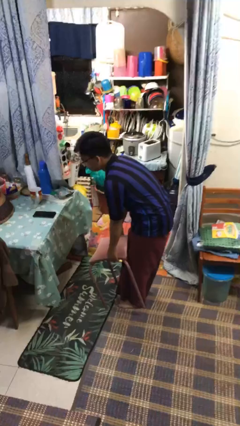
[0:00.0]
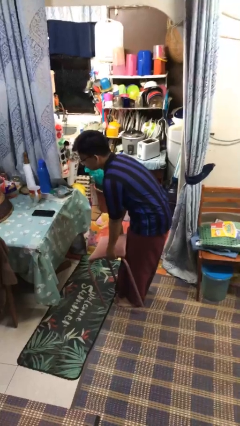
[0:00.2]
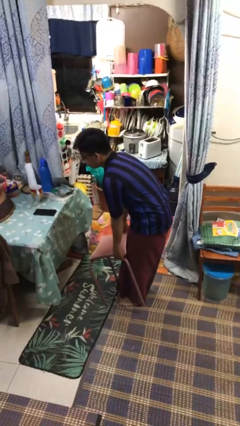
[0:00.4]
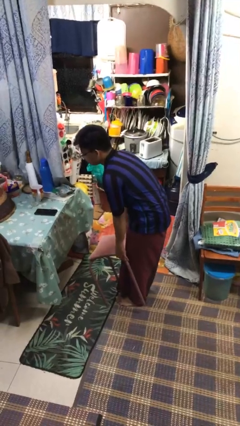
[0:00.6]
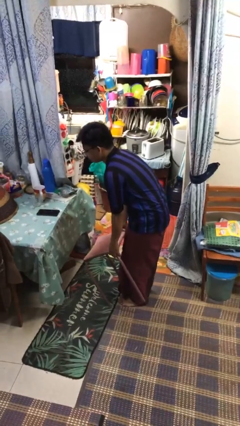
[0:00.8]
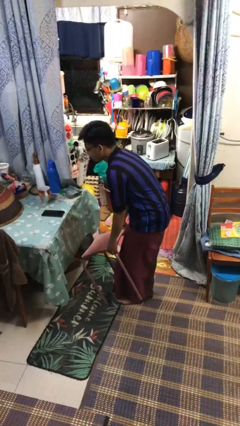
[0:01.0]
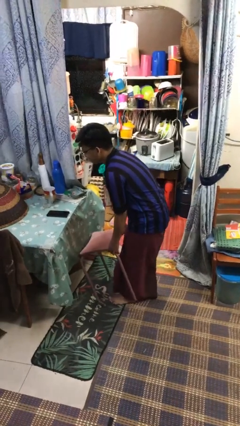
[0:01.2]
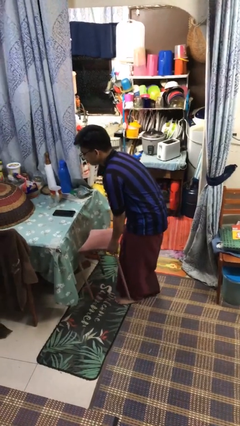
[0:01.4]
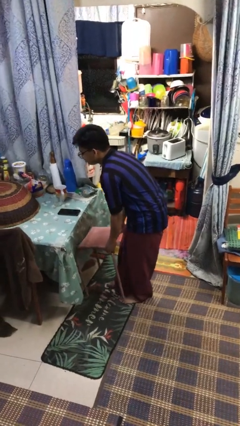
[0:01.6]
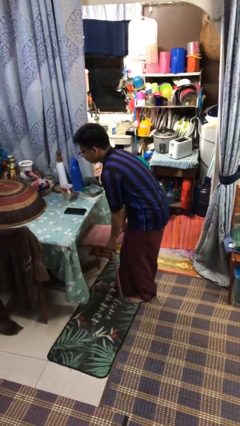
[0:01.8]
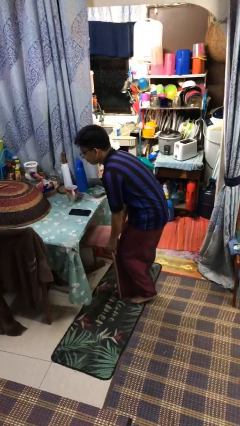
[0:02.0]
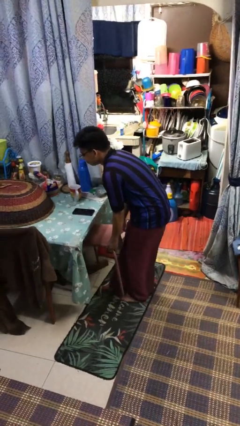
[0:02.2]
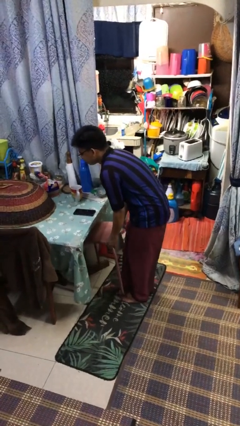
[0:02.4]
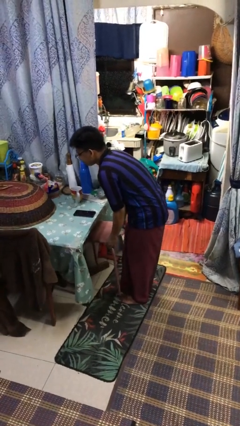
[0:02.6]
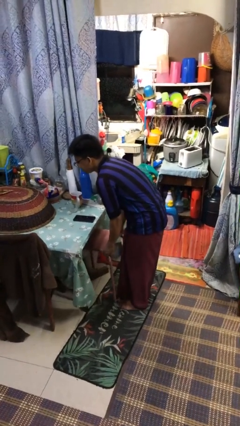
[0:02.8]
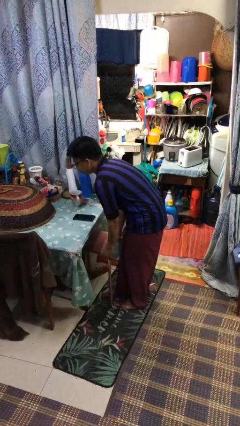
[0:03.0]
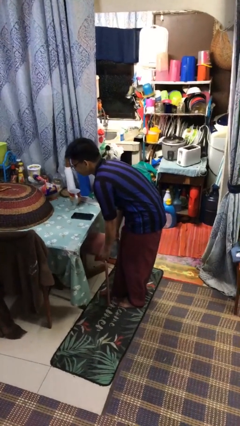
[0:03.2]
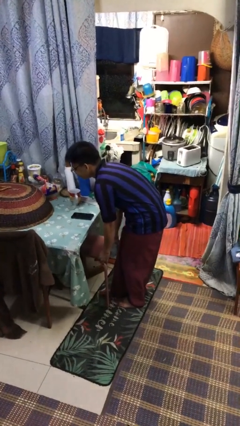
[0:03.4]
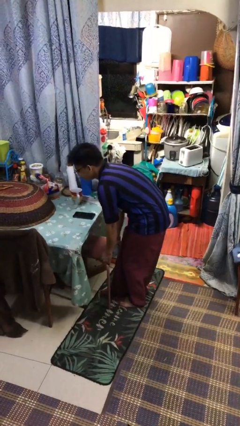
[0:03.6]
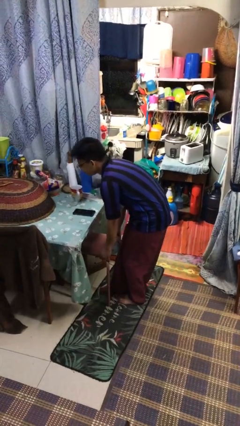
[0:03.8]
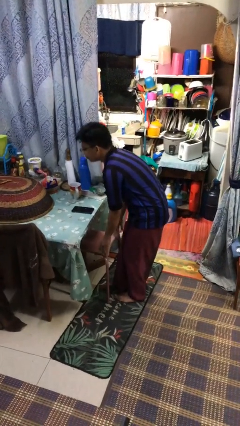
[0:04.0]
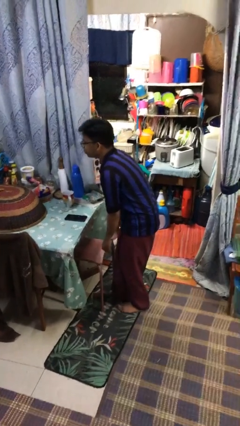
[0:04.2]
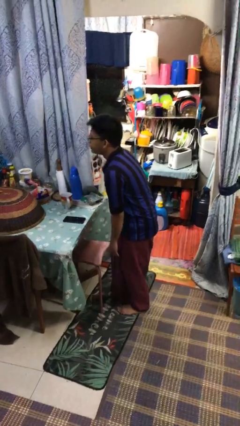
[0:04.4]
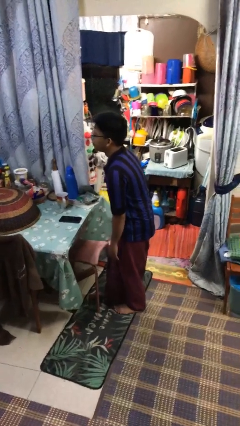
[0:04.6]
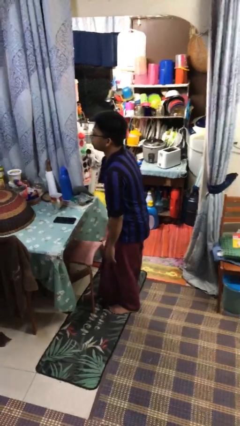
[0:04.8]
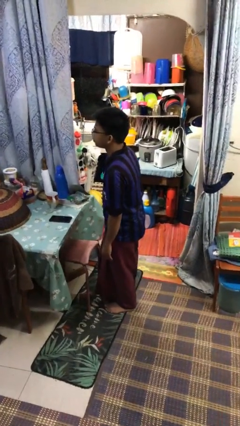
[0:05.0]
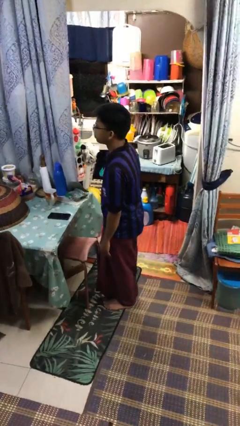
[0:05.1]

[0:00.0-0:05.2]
person pushes in chair

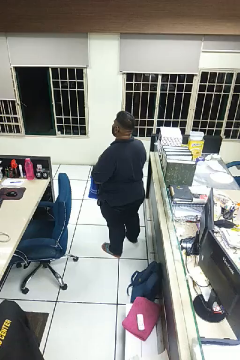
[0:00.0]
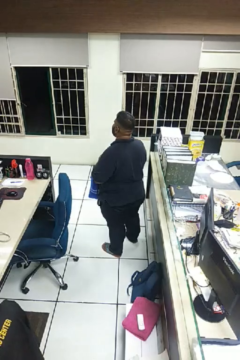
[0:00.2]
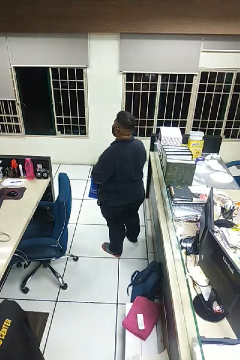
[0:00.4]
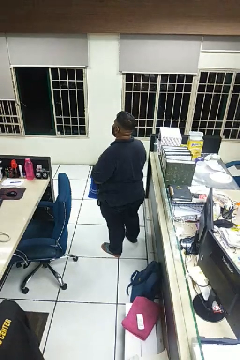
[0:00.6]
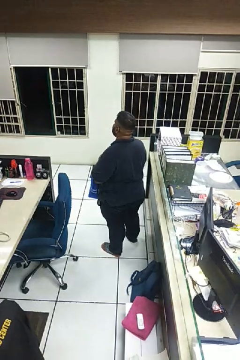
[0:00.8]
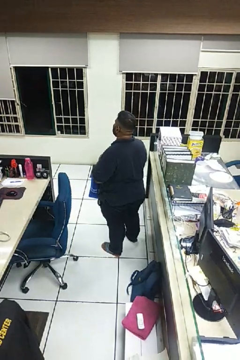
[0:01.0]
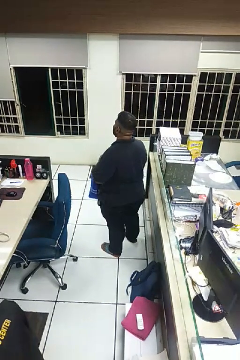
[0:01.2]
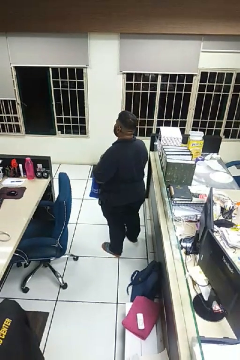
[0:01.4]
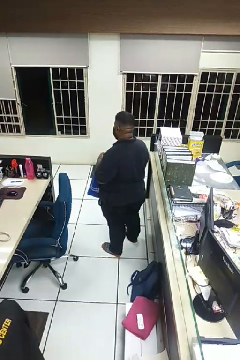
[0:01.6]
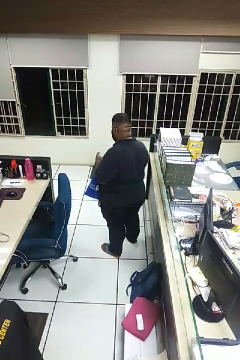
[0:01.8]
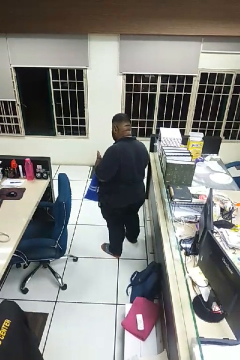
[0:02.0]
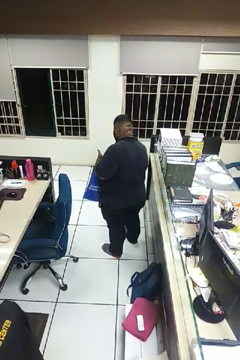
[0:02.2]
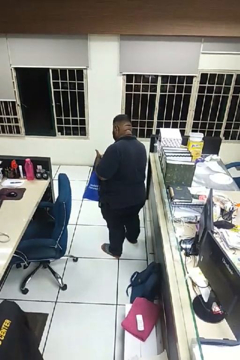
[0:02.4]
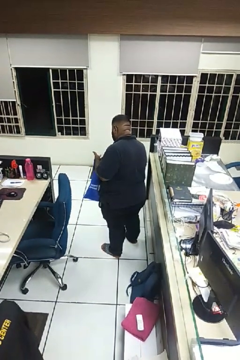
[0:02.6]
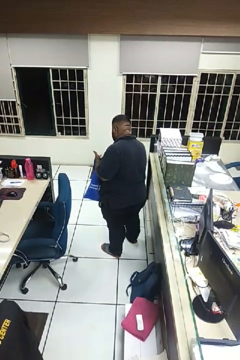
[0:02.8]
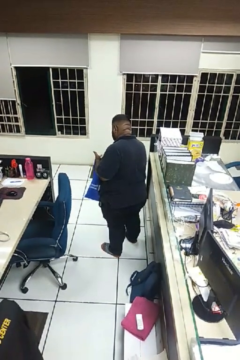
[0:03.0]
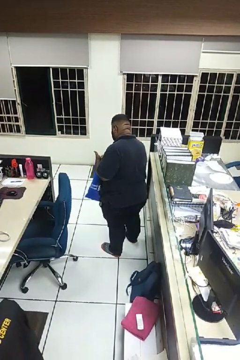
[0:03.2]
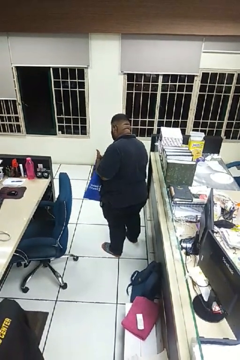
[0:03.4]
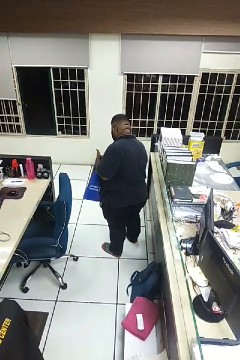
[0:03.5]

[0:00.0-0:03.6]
person searches in bag

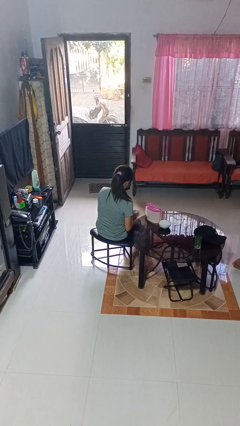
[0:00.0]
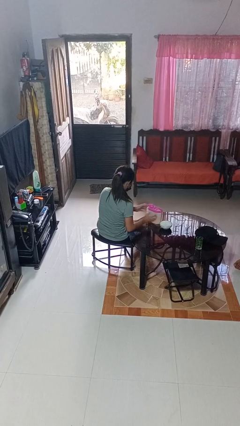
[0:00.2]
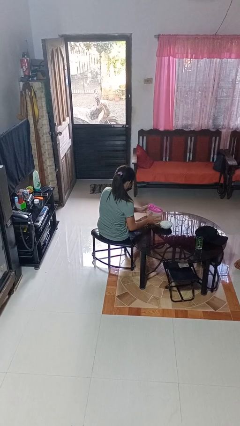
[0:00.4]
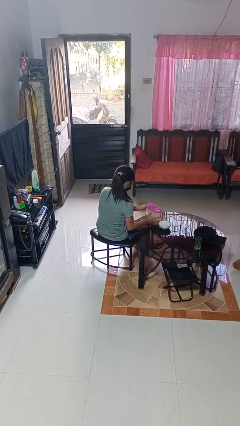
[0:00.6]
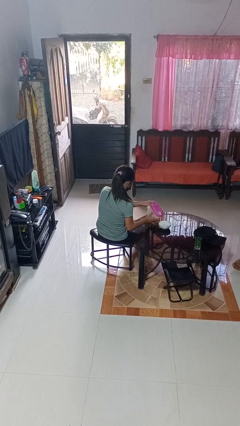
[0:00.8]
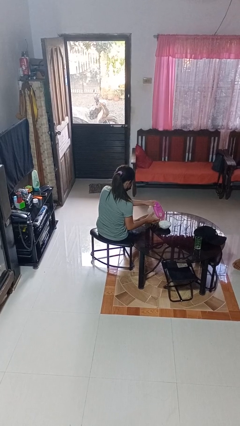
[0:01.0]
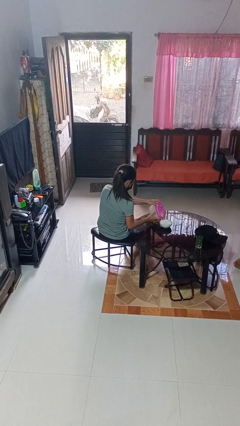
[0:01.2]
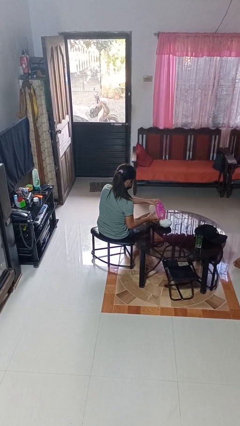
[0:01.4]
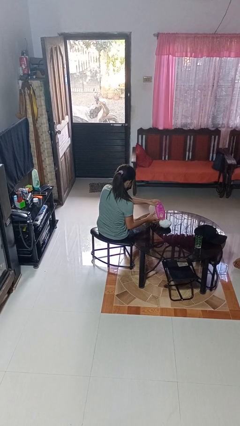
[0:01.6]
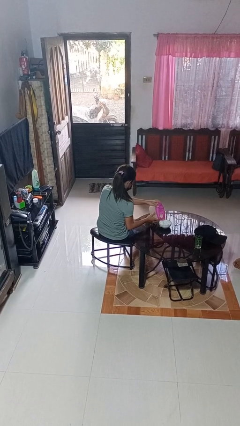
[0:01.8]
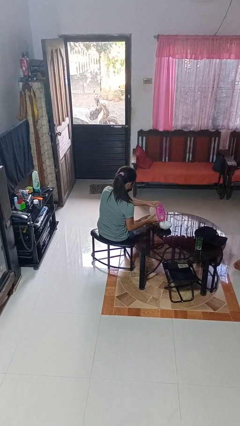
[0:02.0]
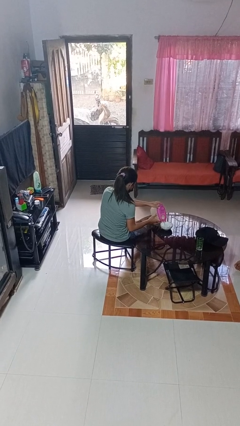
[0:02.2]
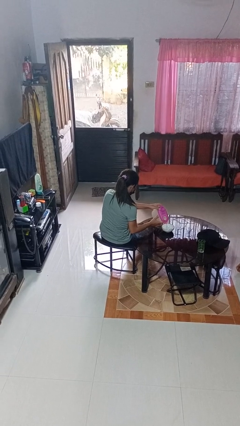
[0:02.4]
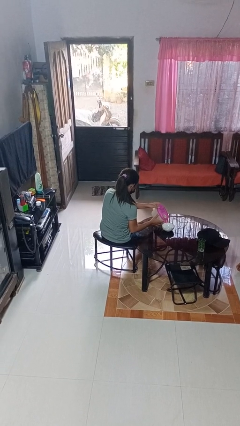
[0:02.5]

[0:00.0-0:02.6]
person pours into bowl

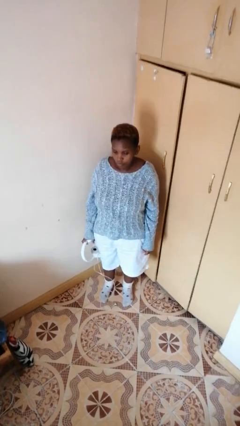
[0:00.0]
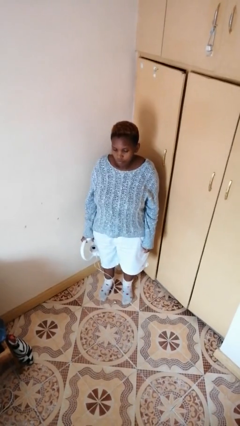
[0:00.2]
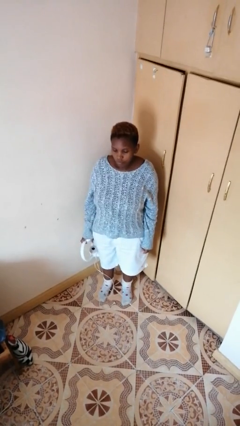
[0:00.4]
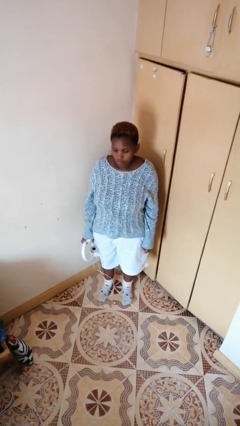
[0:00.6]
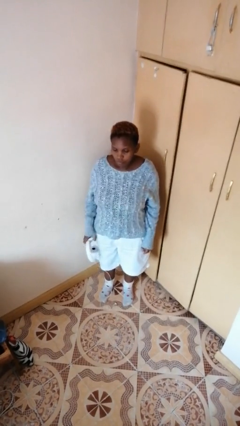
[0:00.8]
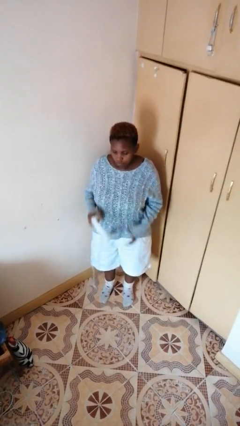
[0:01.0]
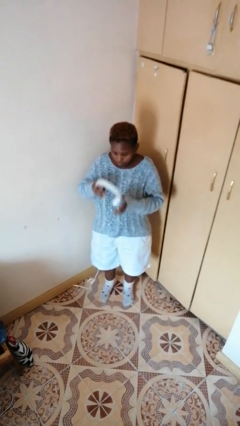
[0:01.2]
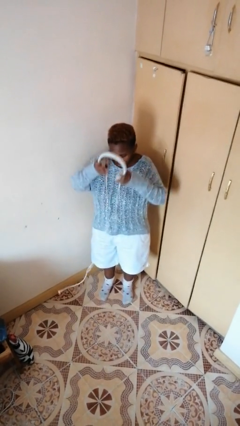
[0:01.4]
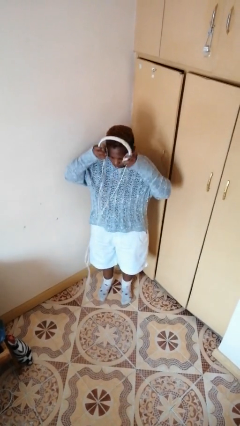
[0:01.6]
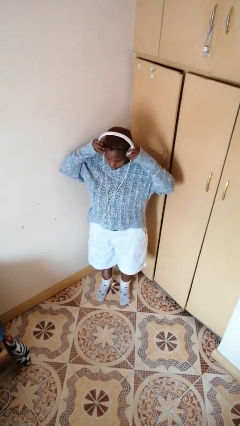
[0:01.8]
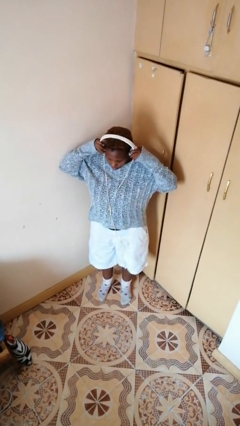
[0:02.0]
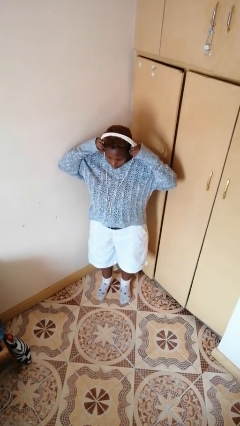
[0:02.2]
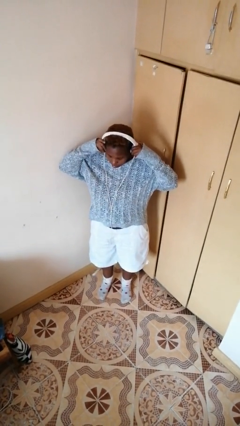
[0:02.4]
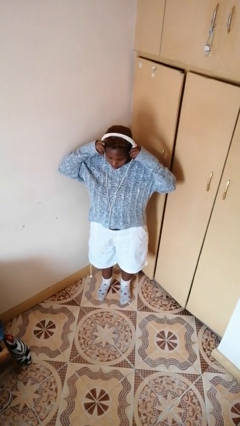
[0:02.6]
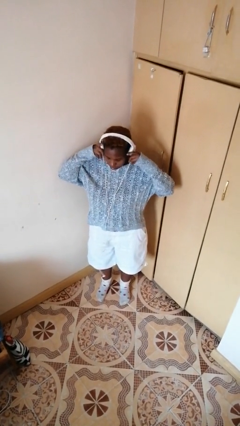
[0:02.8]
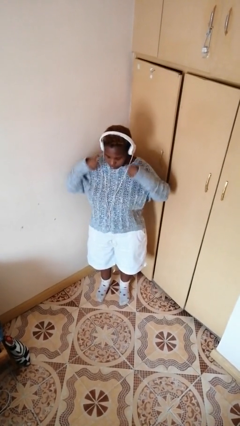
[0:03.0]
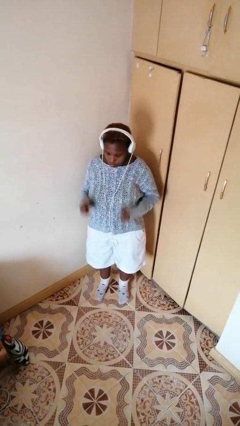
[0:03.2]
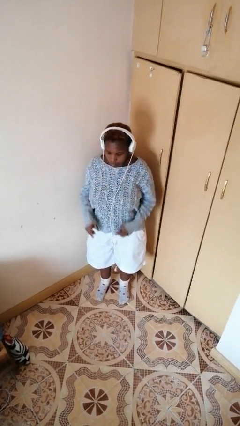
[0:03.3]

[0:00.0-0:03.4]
person puts on headphones

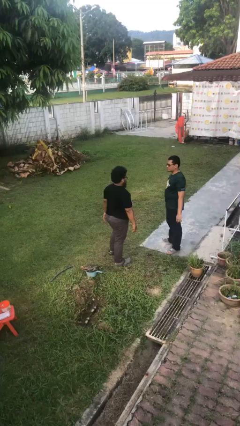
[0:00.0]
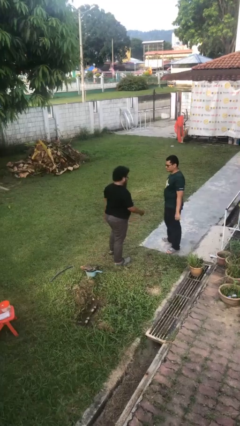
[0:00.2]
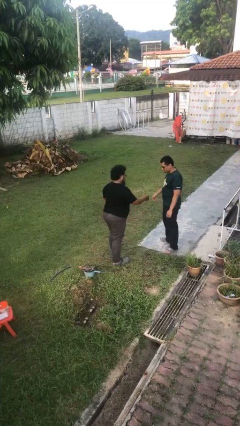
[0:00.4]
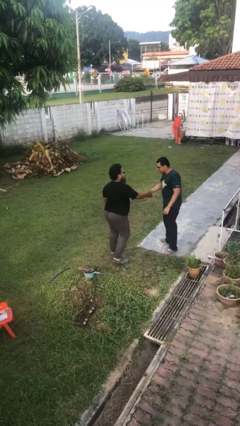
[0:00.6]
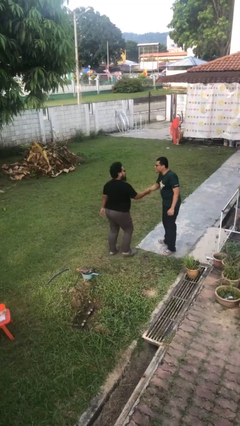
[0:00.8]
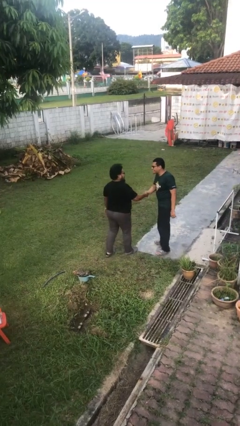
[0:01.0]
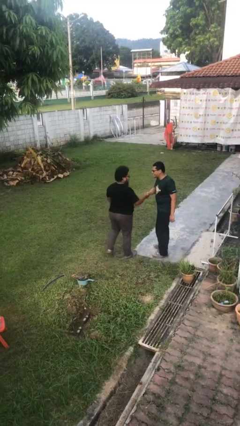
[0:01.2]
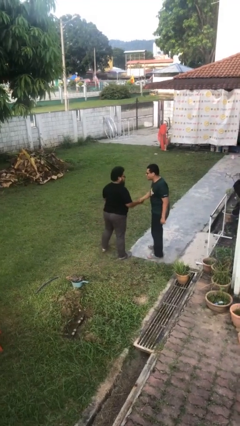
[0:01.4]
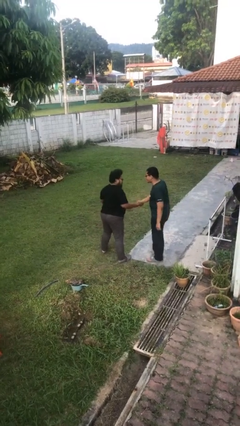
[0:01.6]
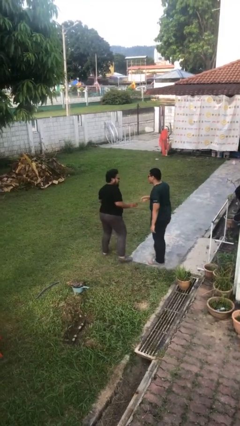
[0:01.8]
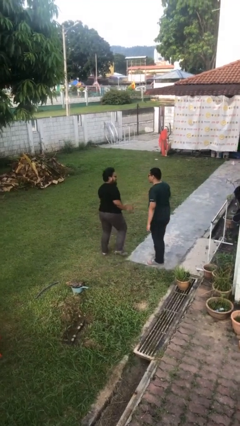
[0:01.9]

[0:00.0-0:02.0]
person shakes hand

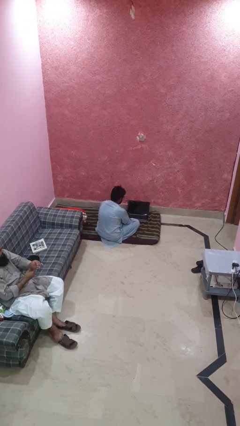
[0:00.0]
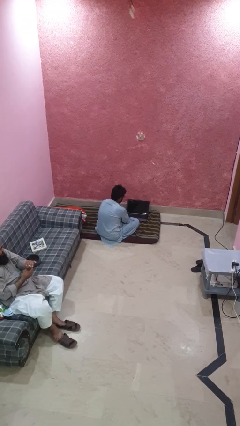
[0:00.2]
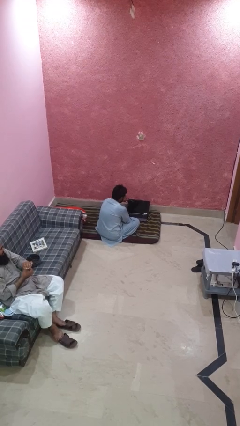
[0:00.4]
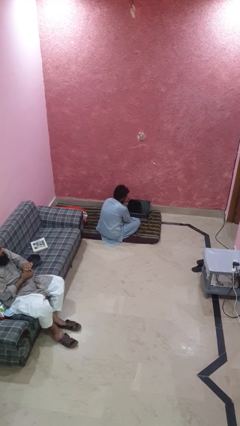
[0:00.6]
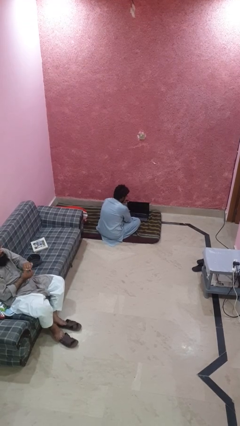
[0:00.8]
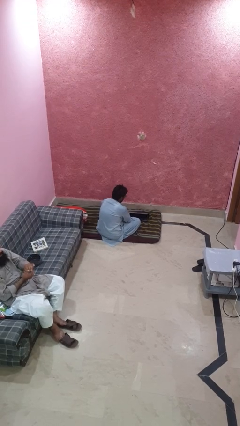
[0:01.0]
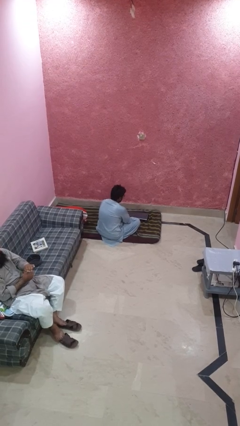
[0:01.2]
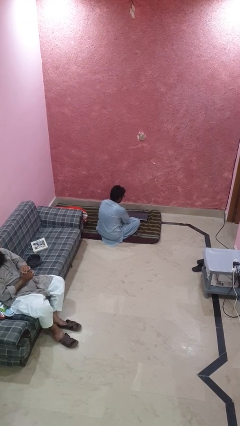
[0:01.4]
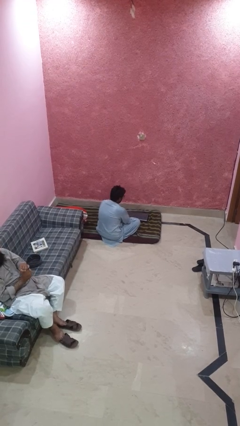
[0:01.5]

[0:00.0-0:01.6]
person closes laptop
